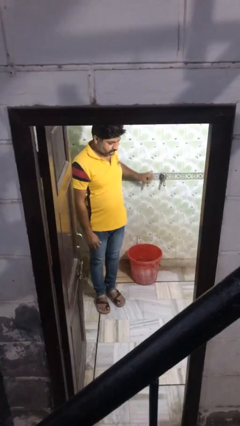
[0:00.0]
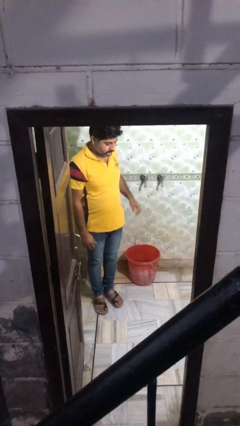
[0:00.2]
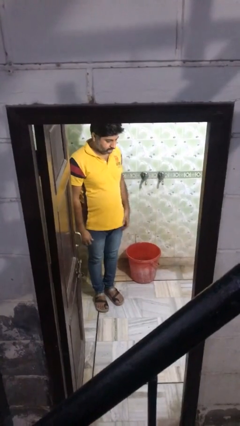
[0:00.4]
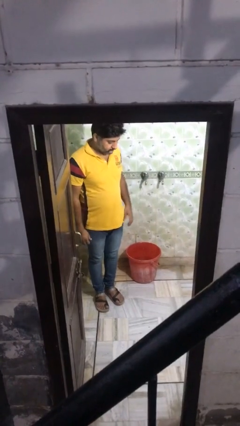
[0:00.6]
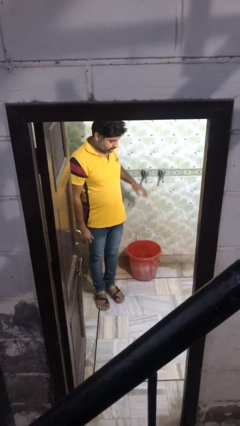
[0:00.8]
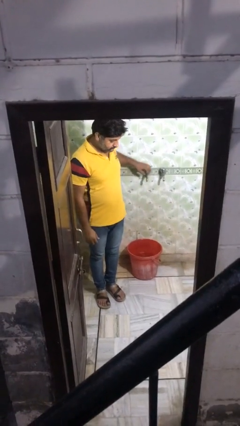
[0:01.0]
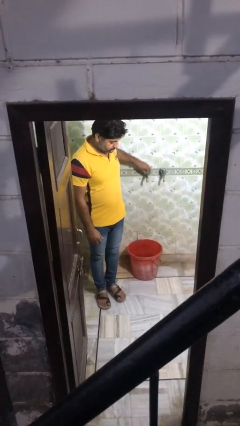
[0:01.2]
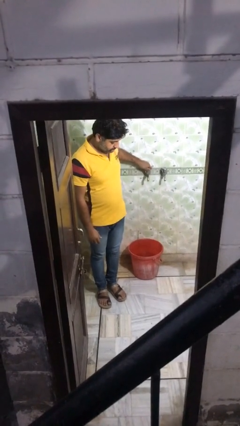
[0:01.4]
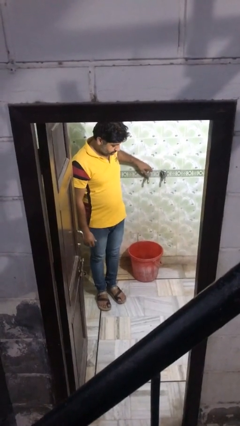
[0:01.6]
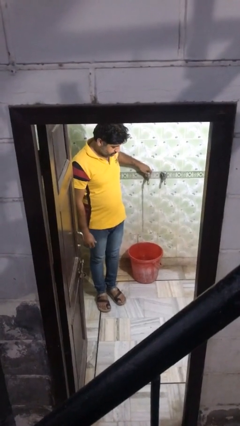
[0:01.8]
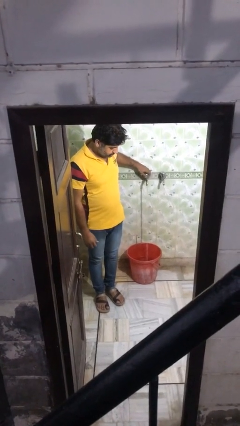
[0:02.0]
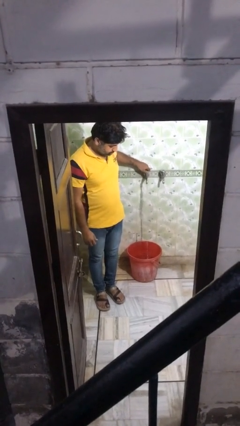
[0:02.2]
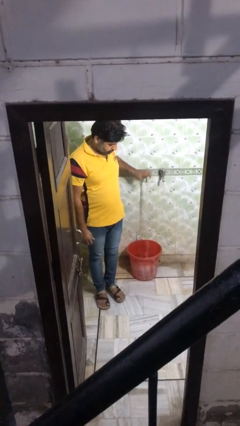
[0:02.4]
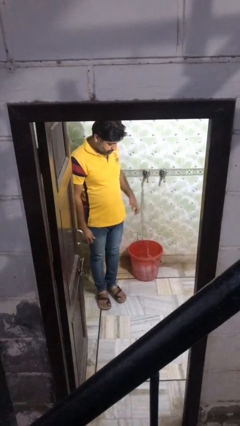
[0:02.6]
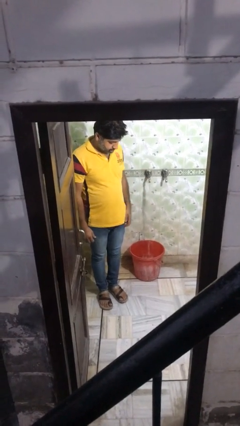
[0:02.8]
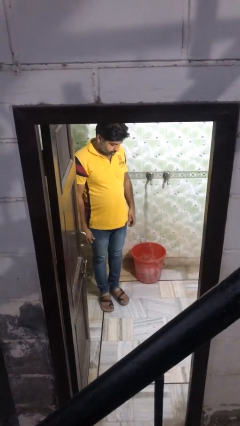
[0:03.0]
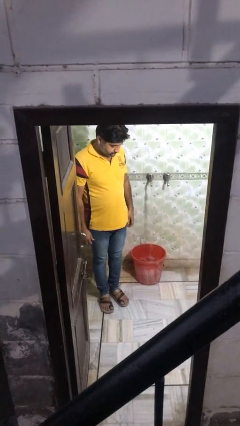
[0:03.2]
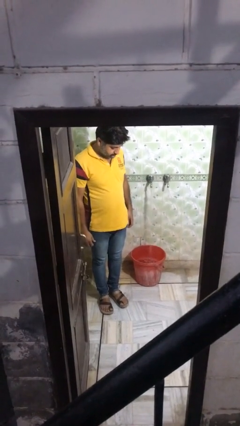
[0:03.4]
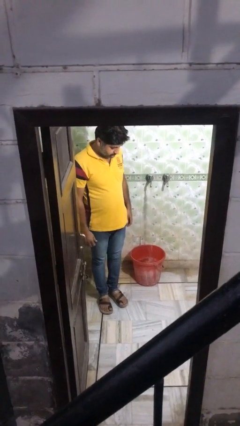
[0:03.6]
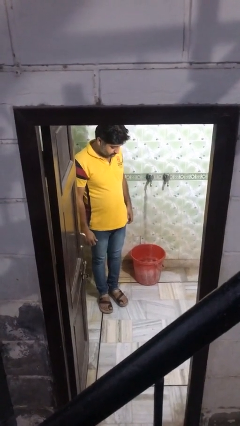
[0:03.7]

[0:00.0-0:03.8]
person turns on faucet

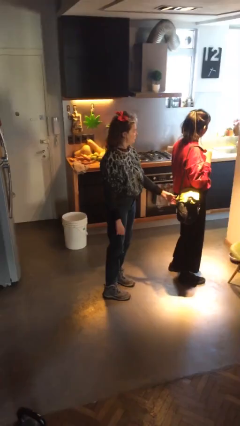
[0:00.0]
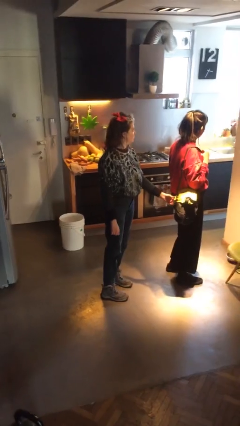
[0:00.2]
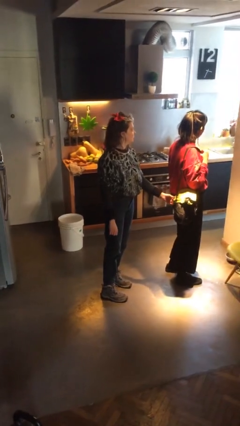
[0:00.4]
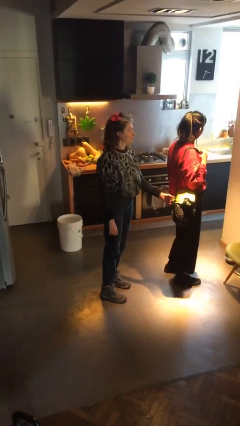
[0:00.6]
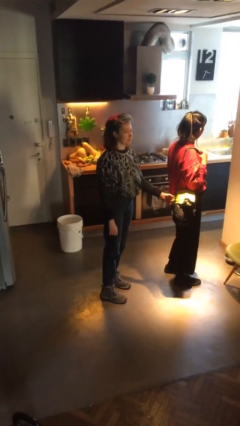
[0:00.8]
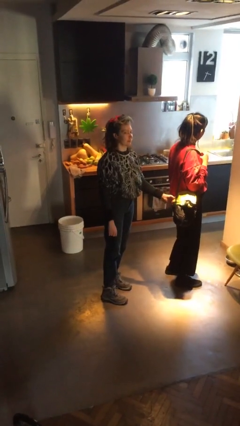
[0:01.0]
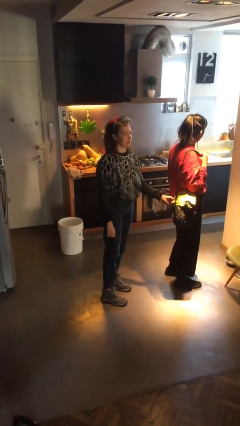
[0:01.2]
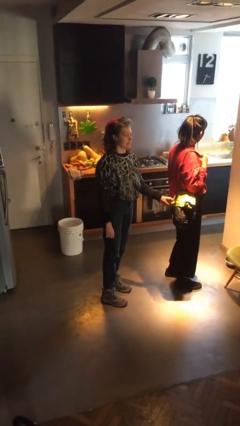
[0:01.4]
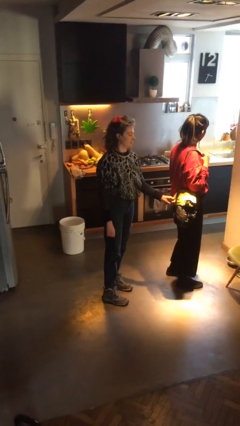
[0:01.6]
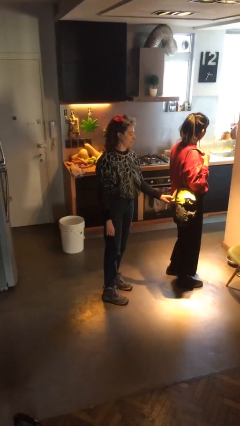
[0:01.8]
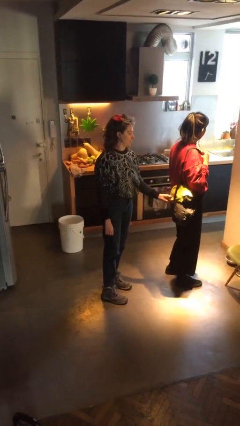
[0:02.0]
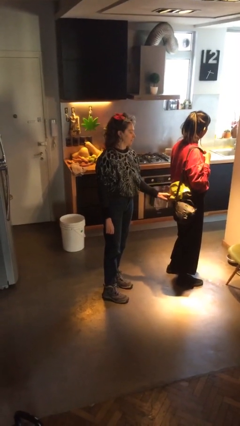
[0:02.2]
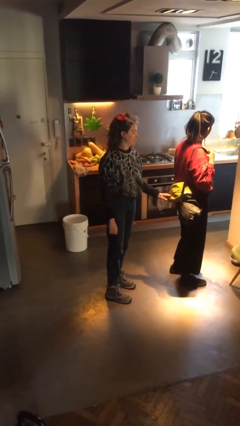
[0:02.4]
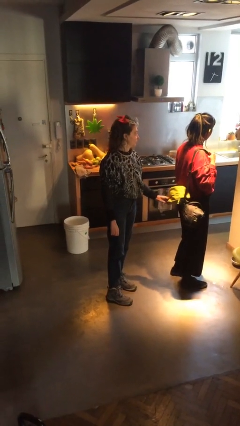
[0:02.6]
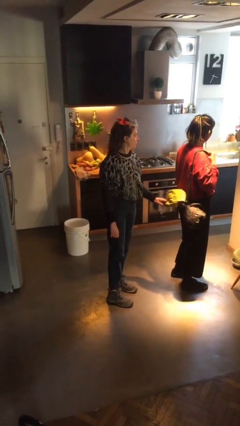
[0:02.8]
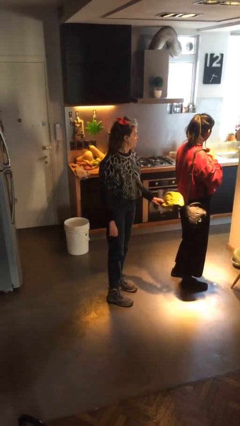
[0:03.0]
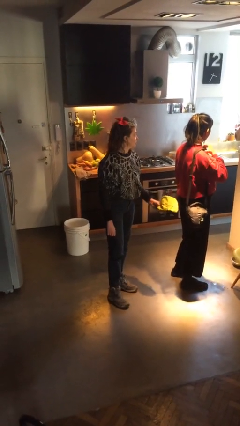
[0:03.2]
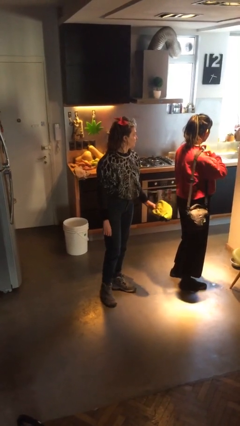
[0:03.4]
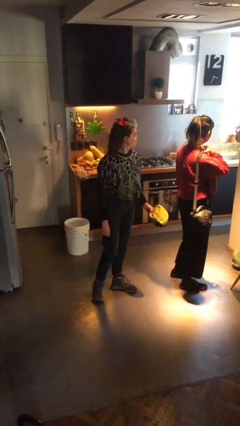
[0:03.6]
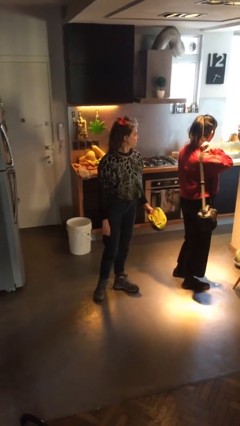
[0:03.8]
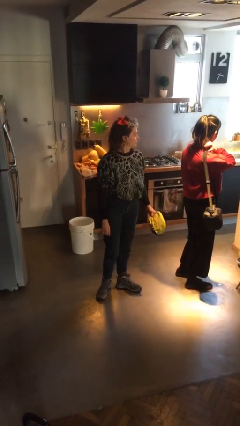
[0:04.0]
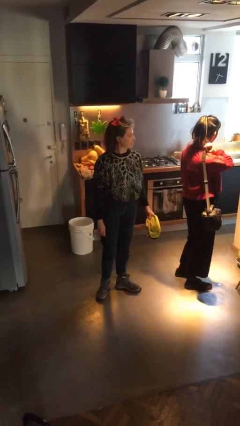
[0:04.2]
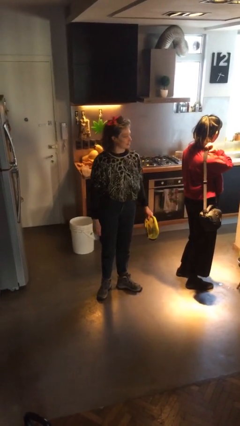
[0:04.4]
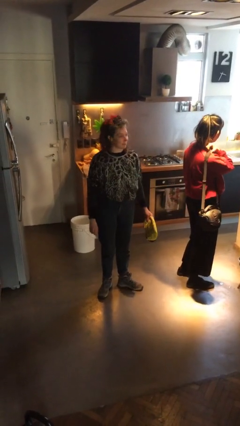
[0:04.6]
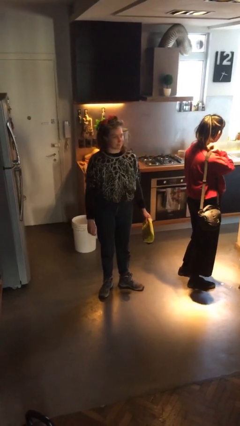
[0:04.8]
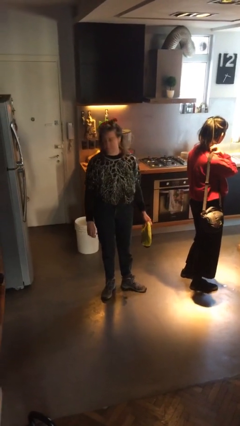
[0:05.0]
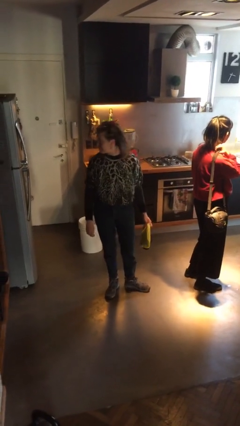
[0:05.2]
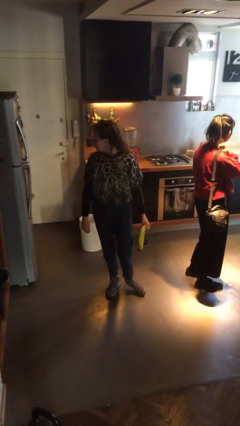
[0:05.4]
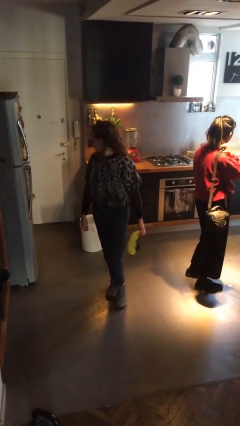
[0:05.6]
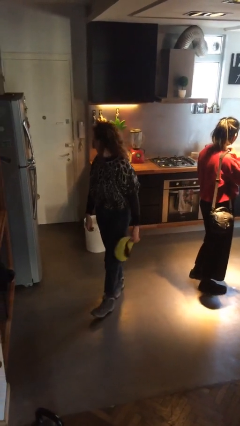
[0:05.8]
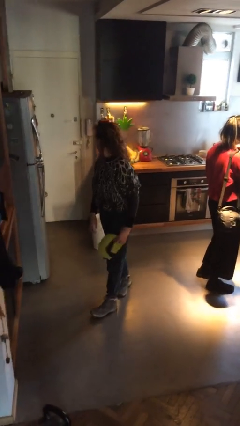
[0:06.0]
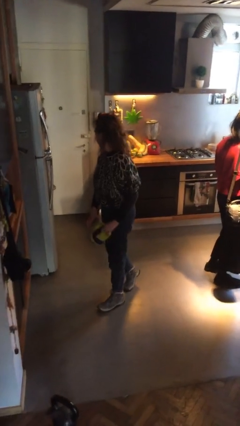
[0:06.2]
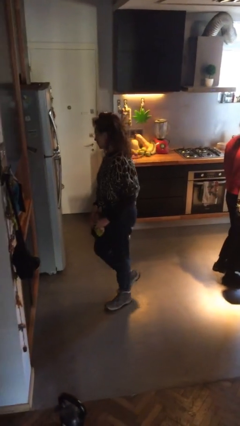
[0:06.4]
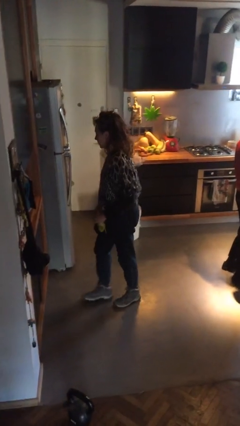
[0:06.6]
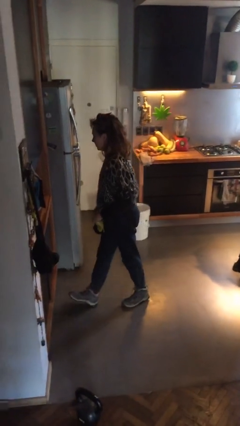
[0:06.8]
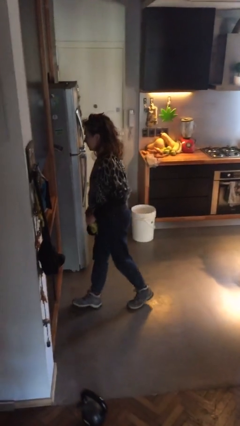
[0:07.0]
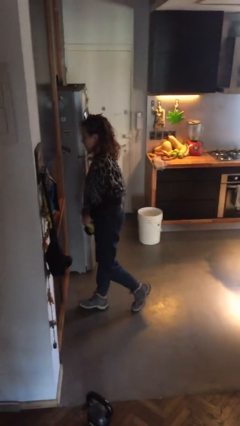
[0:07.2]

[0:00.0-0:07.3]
person steals object from person

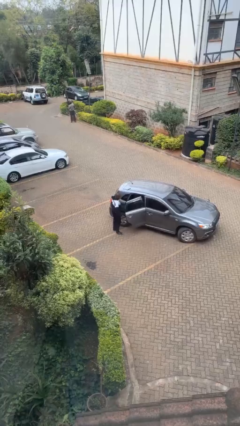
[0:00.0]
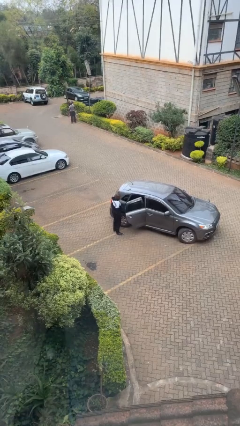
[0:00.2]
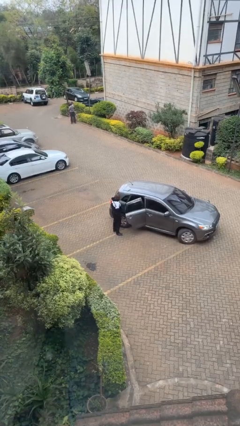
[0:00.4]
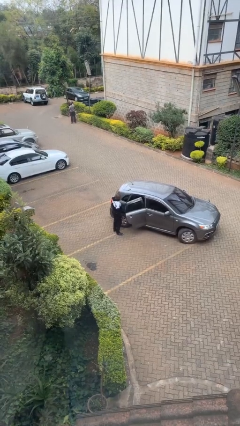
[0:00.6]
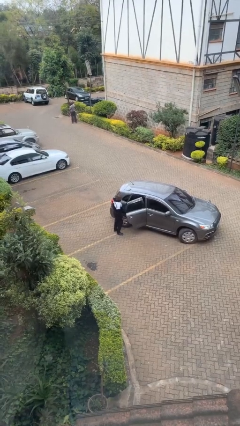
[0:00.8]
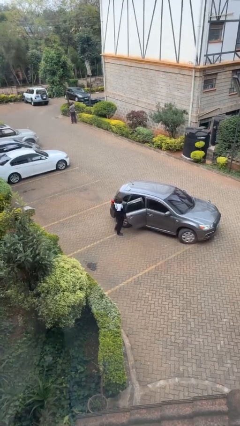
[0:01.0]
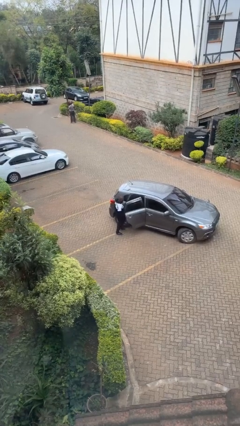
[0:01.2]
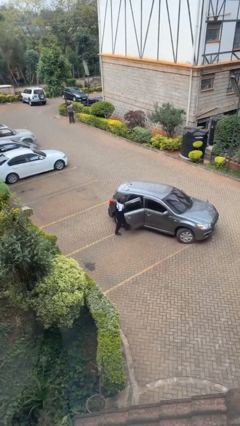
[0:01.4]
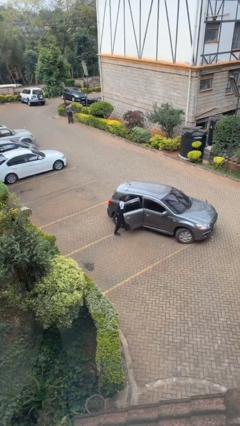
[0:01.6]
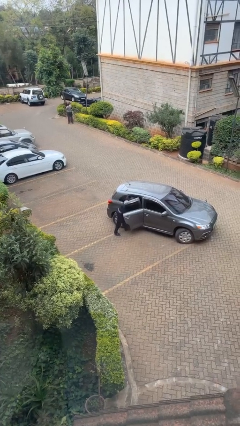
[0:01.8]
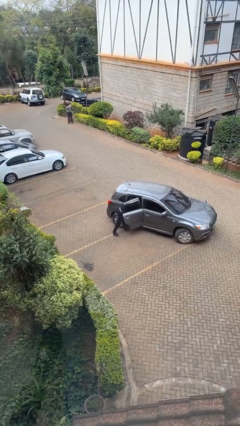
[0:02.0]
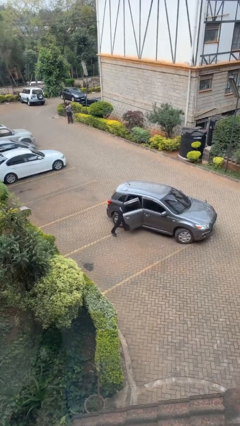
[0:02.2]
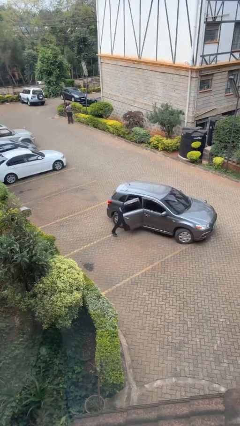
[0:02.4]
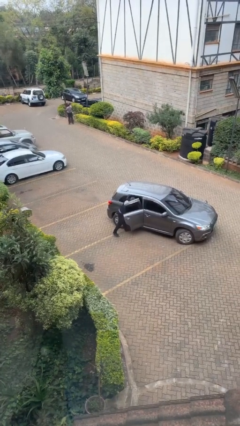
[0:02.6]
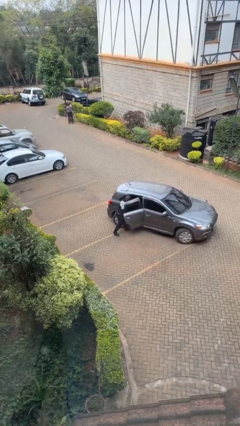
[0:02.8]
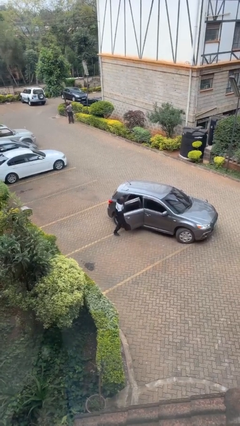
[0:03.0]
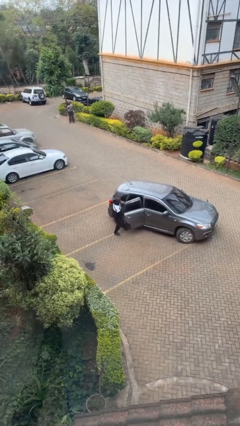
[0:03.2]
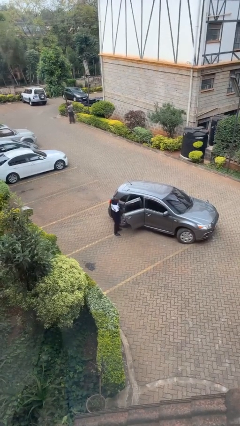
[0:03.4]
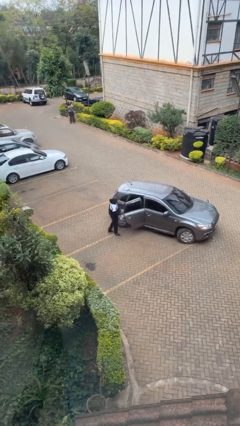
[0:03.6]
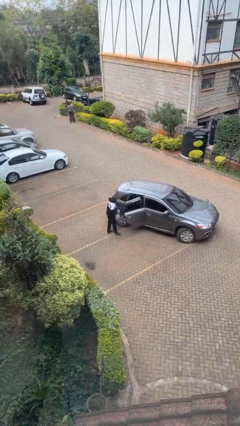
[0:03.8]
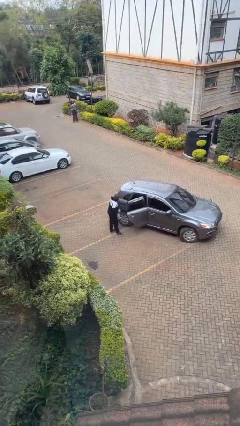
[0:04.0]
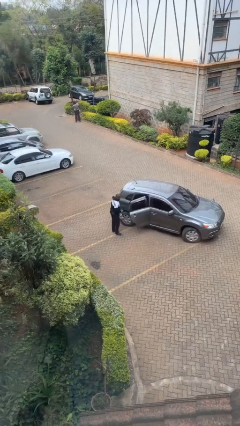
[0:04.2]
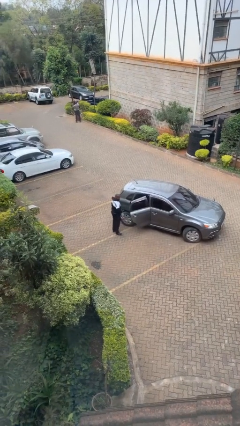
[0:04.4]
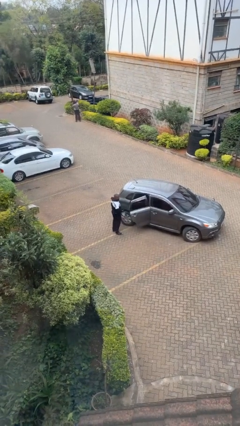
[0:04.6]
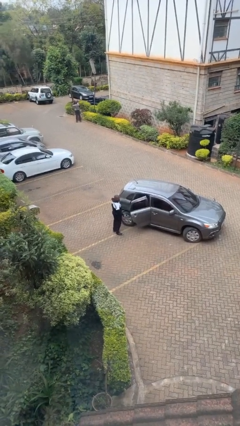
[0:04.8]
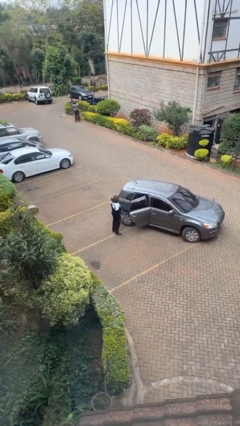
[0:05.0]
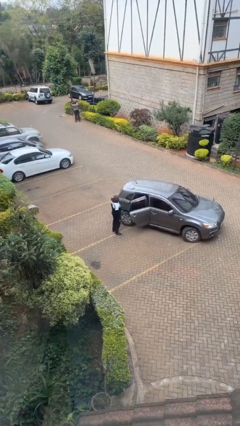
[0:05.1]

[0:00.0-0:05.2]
person unloads car

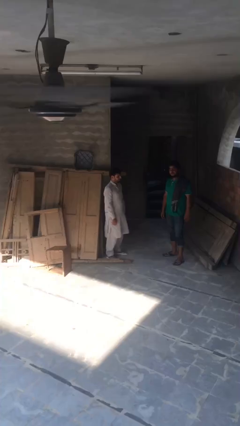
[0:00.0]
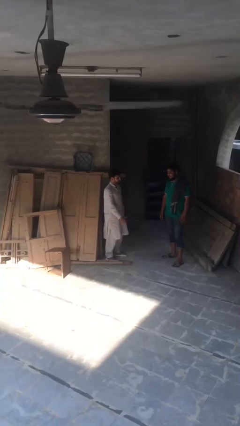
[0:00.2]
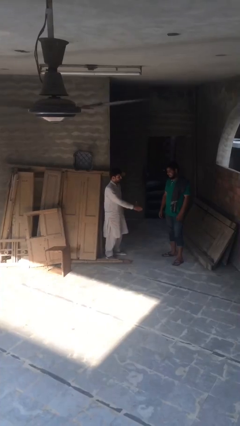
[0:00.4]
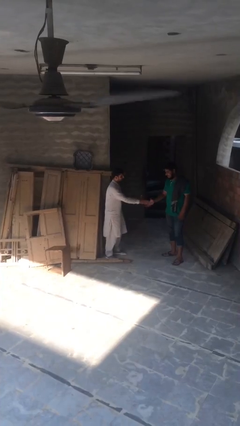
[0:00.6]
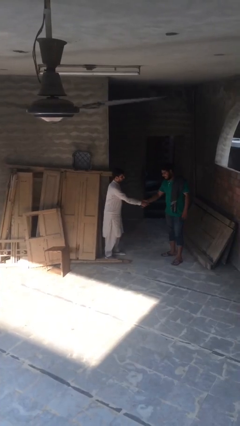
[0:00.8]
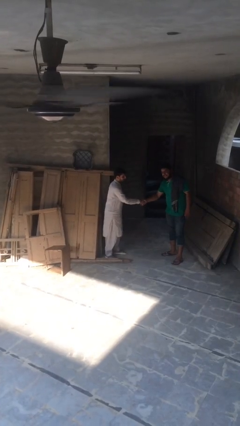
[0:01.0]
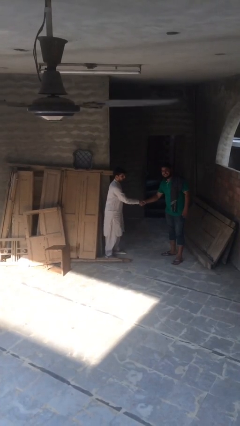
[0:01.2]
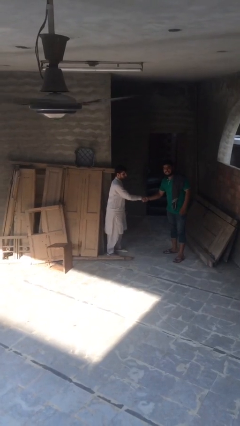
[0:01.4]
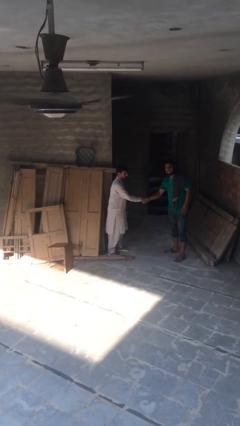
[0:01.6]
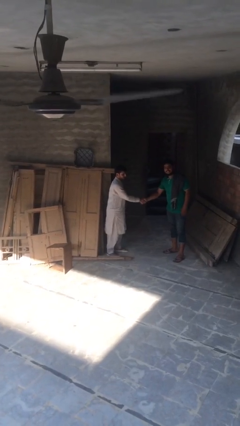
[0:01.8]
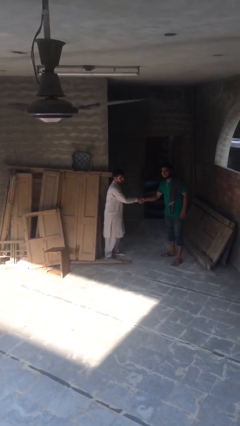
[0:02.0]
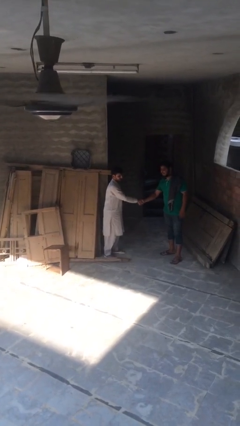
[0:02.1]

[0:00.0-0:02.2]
person shakes hand
